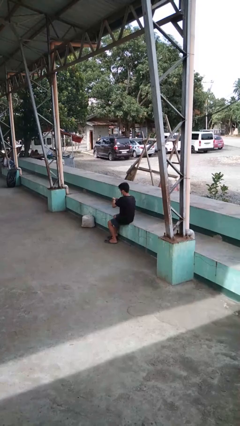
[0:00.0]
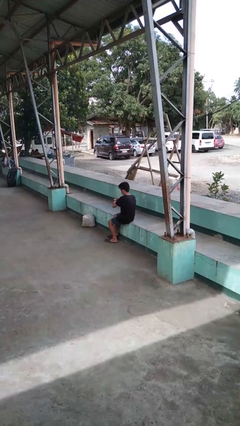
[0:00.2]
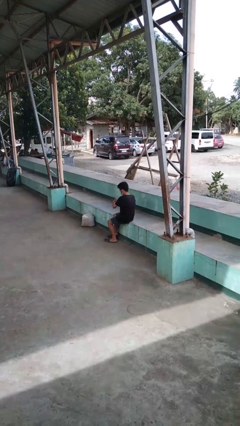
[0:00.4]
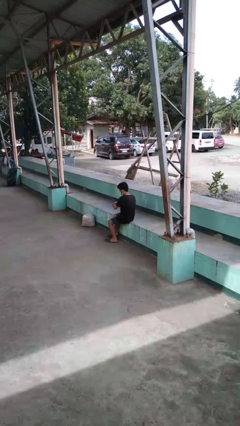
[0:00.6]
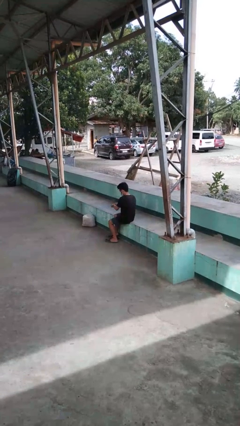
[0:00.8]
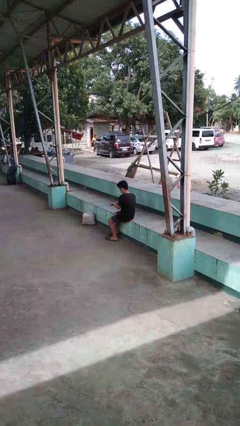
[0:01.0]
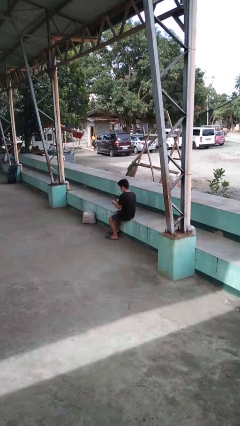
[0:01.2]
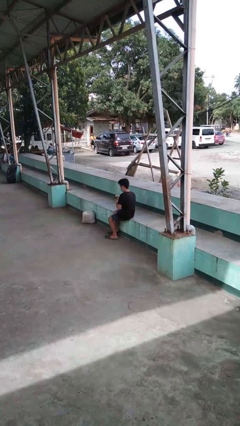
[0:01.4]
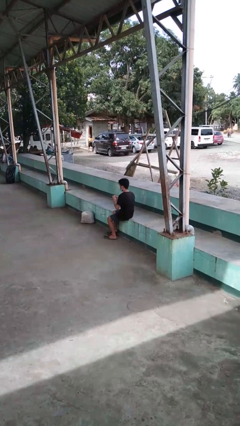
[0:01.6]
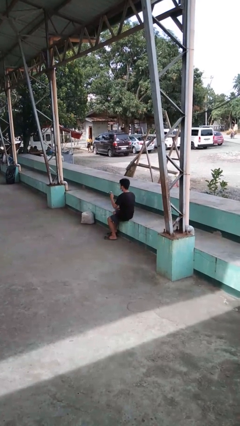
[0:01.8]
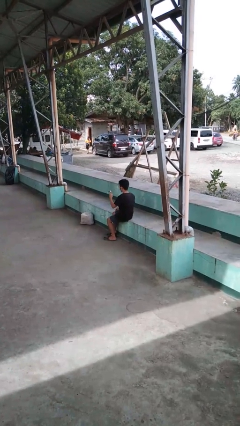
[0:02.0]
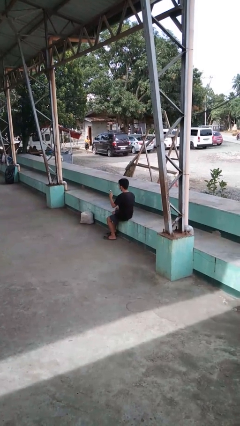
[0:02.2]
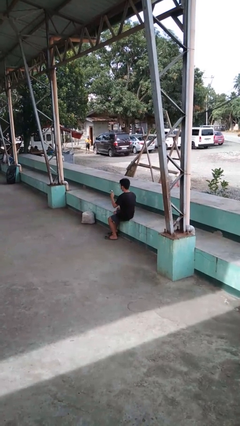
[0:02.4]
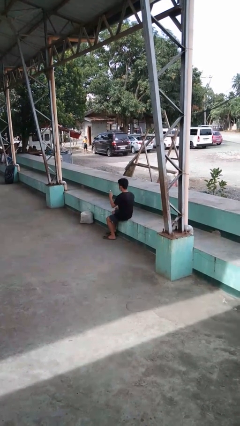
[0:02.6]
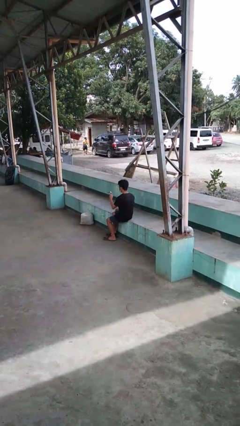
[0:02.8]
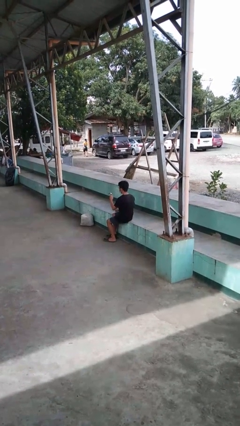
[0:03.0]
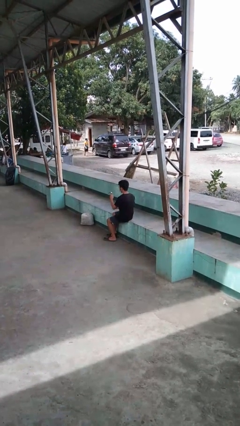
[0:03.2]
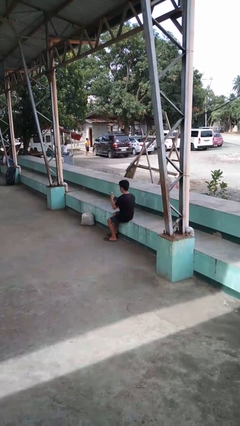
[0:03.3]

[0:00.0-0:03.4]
person takes off wristwatch

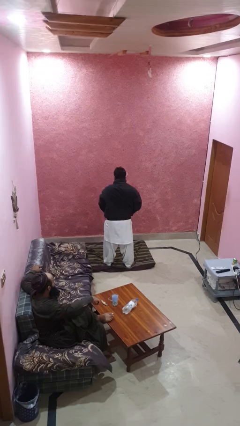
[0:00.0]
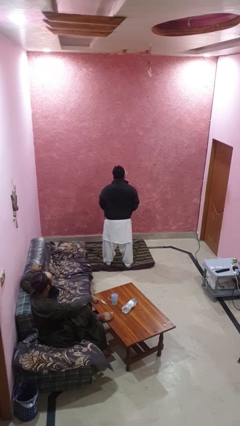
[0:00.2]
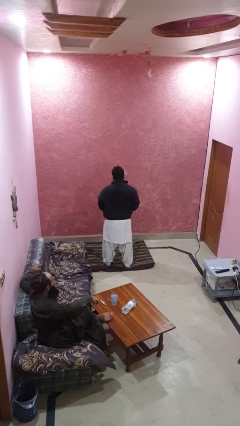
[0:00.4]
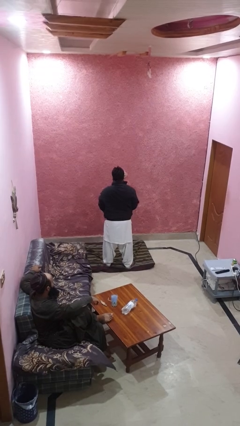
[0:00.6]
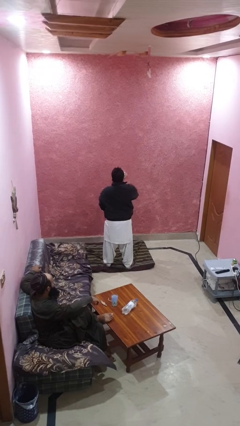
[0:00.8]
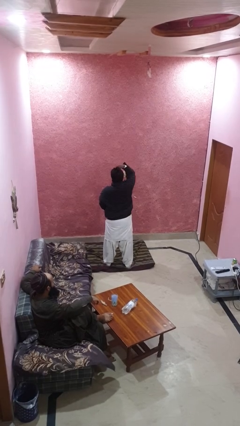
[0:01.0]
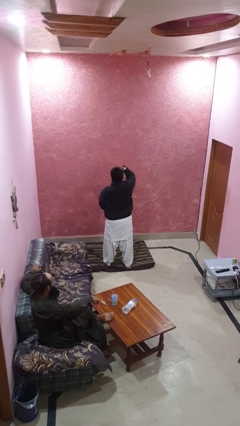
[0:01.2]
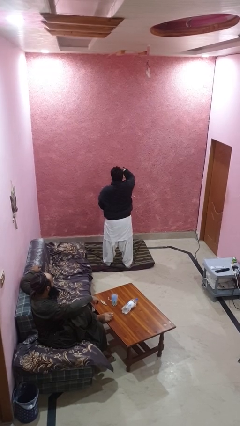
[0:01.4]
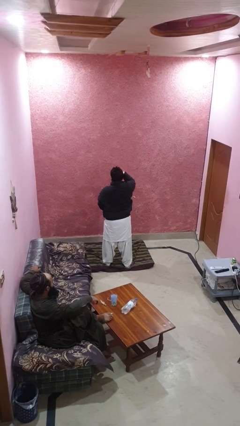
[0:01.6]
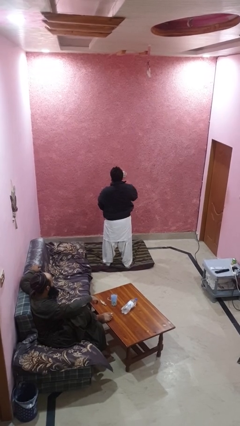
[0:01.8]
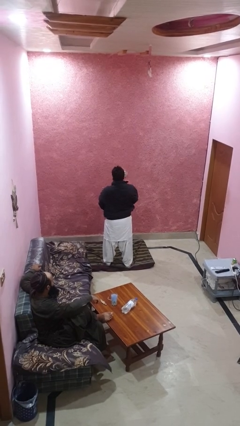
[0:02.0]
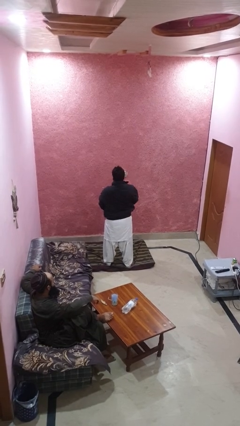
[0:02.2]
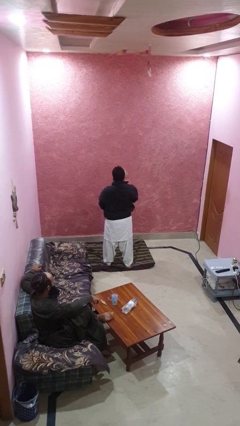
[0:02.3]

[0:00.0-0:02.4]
person zips up jacket

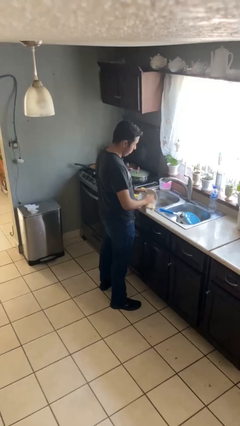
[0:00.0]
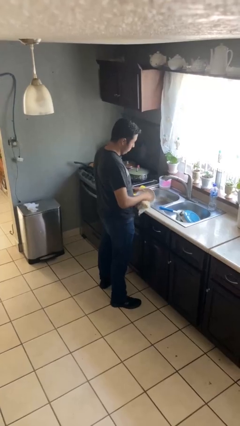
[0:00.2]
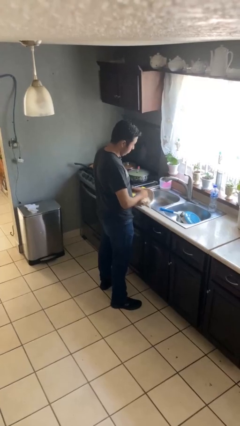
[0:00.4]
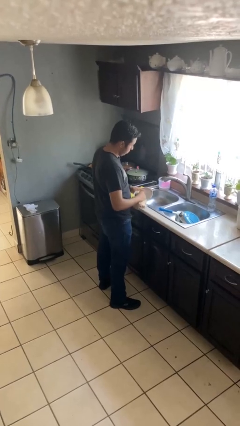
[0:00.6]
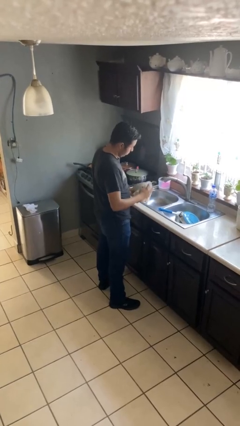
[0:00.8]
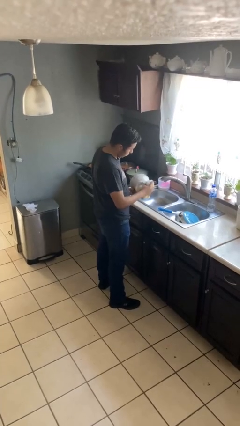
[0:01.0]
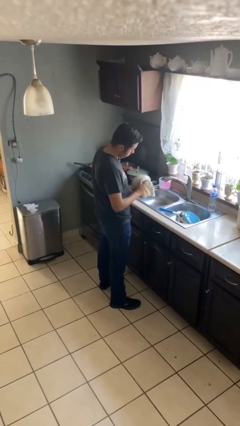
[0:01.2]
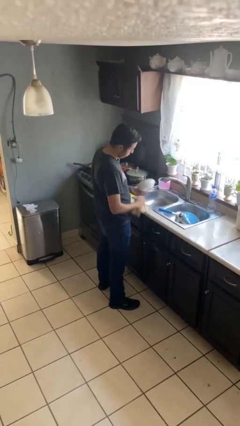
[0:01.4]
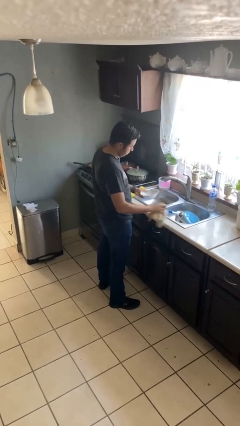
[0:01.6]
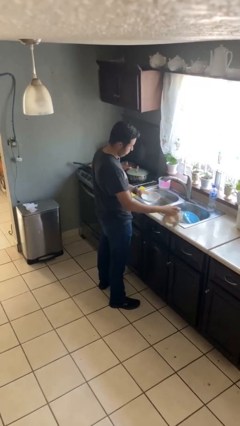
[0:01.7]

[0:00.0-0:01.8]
person dries dish

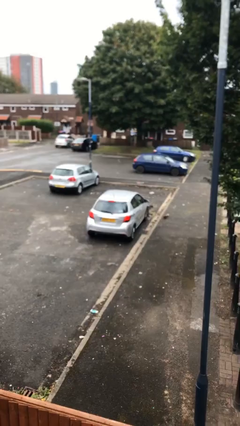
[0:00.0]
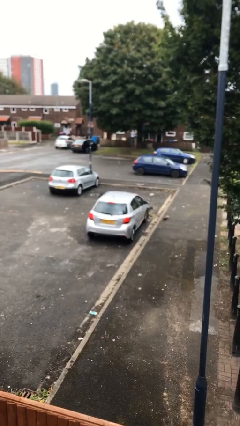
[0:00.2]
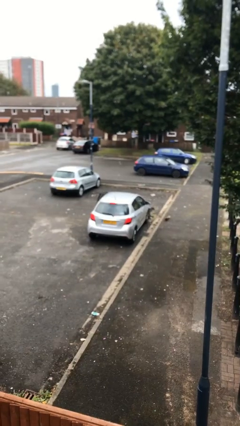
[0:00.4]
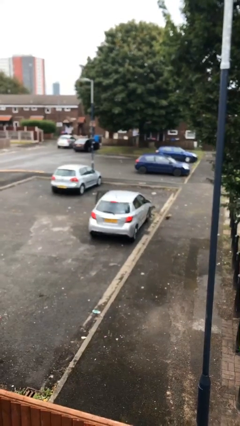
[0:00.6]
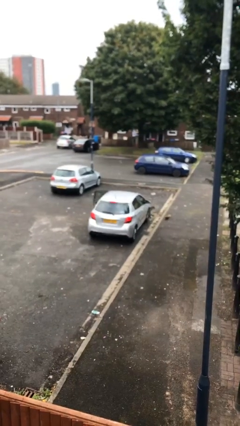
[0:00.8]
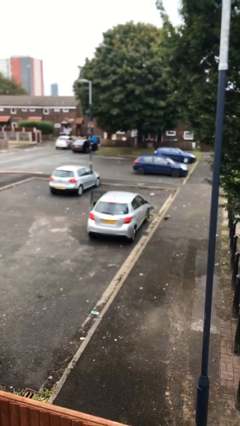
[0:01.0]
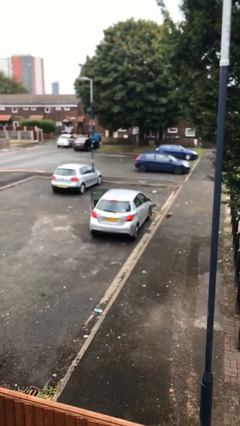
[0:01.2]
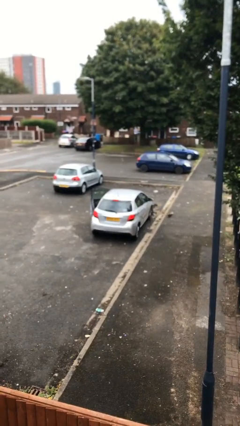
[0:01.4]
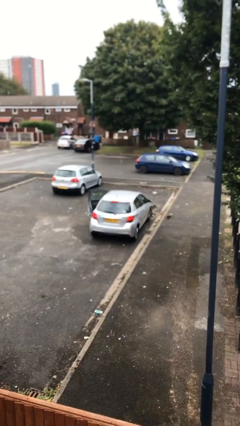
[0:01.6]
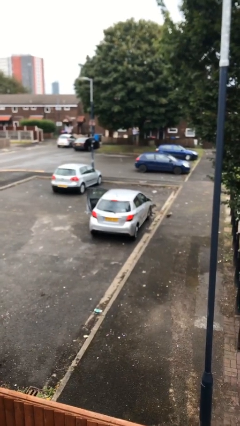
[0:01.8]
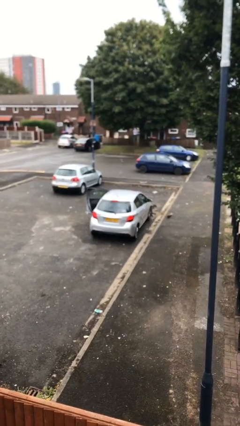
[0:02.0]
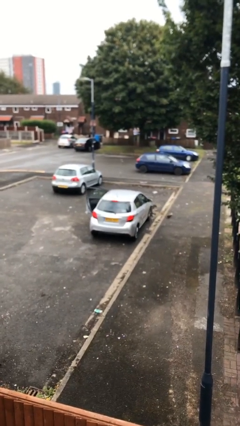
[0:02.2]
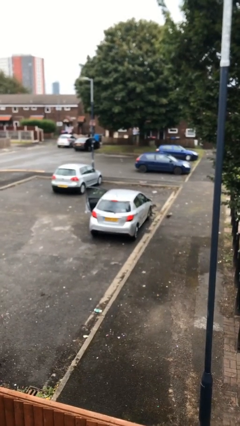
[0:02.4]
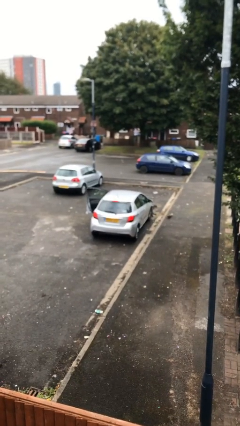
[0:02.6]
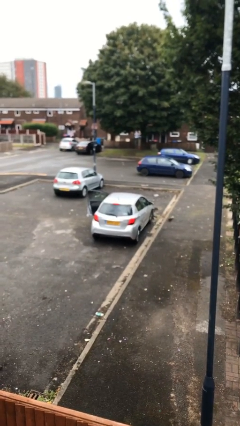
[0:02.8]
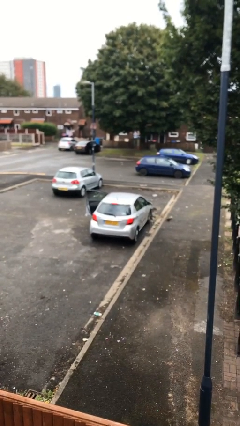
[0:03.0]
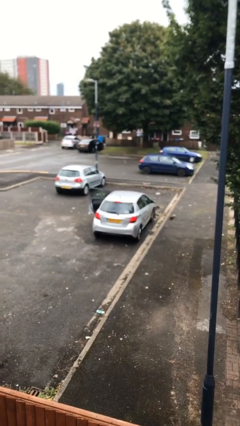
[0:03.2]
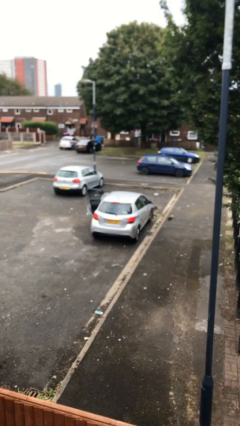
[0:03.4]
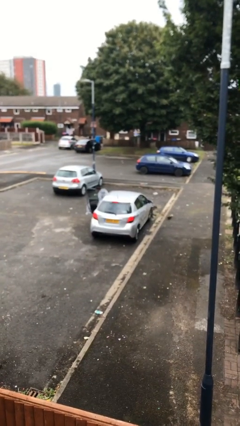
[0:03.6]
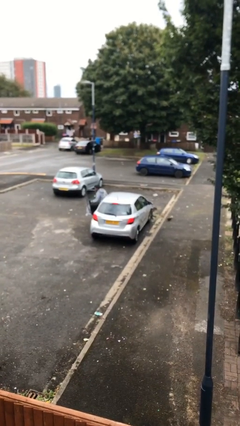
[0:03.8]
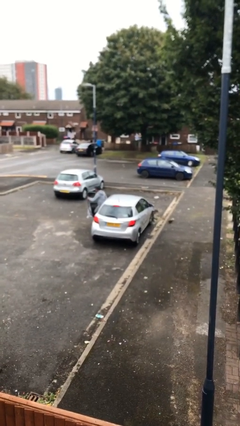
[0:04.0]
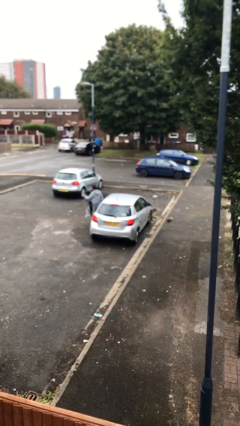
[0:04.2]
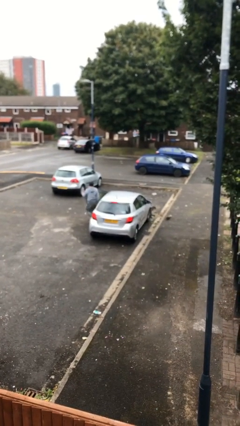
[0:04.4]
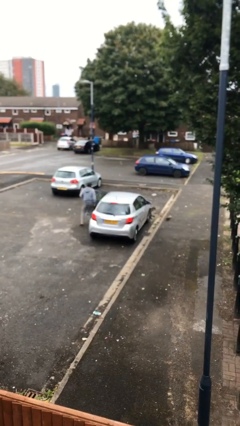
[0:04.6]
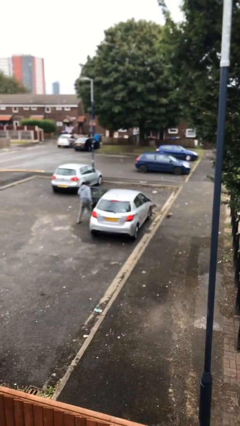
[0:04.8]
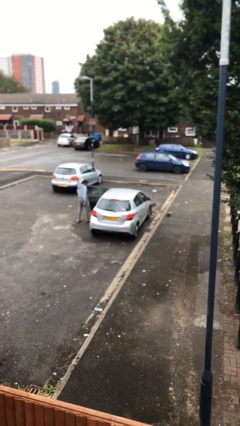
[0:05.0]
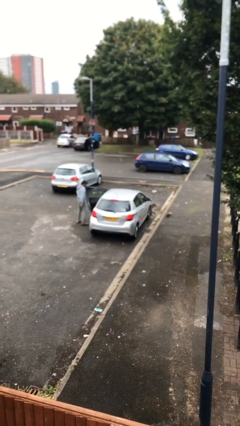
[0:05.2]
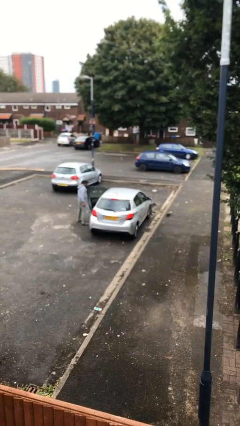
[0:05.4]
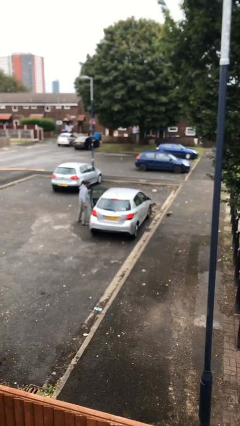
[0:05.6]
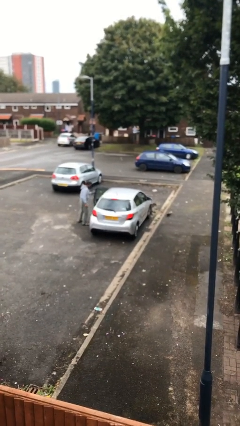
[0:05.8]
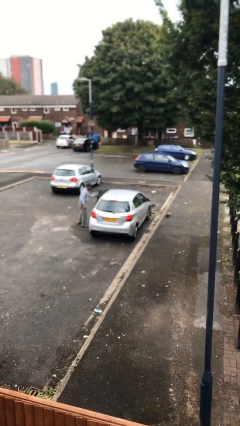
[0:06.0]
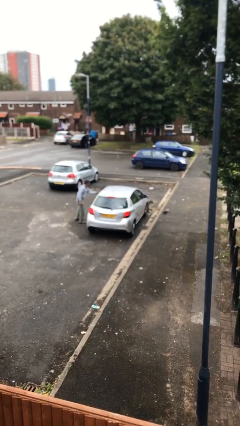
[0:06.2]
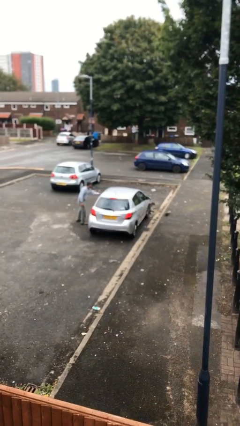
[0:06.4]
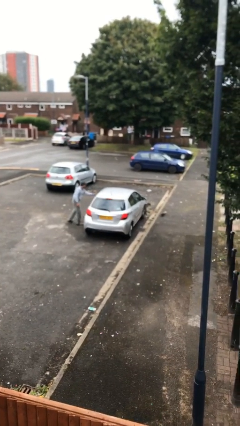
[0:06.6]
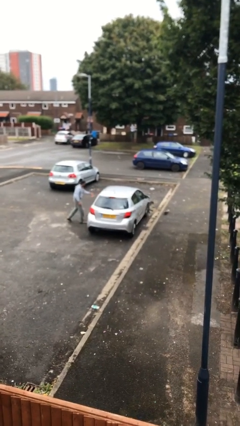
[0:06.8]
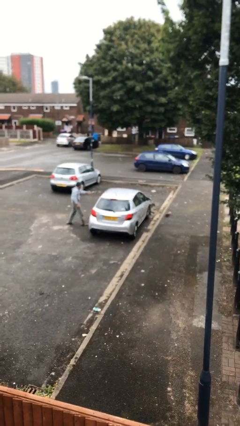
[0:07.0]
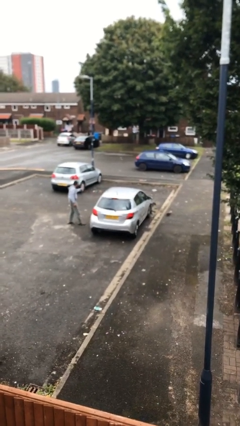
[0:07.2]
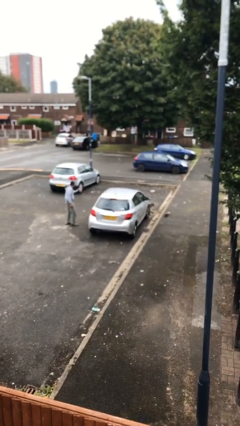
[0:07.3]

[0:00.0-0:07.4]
car drops off person

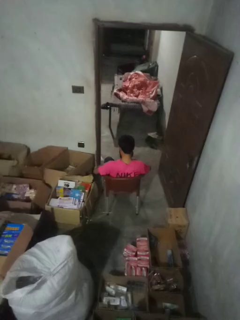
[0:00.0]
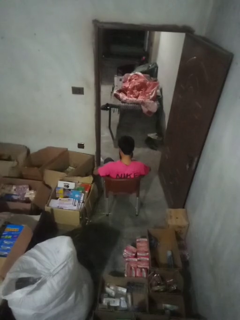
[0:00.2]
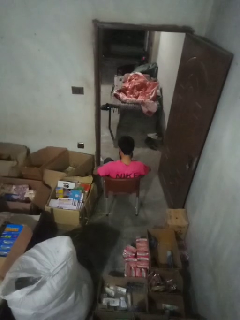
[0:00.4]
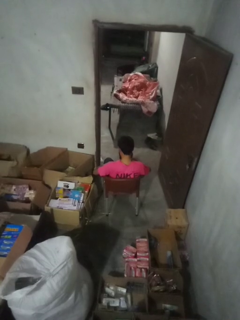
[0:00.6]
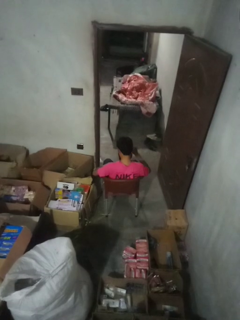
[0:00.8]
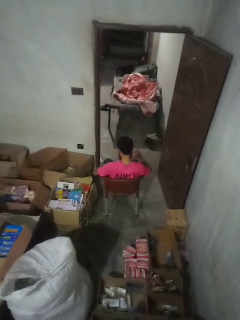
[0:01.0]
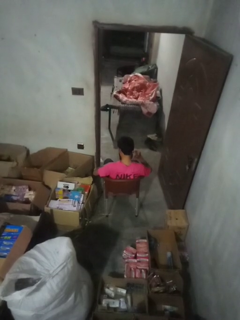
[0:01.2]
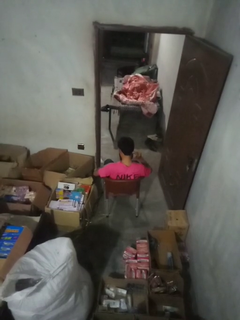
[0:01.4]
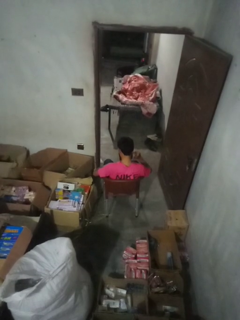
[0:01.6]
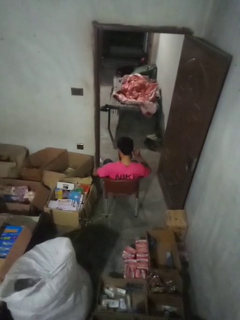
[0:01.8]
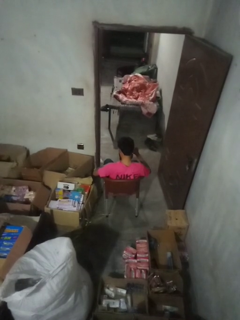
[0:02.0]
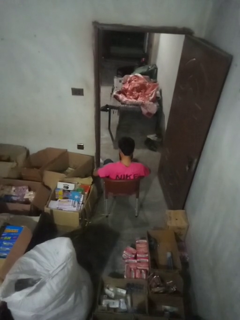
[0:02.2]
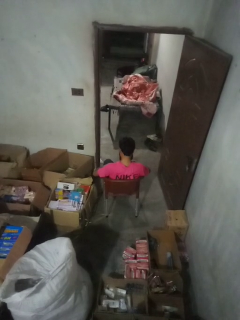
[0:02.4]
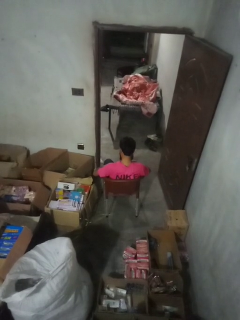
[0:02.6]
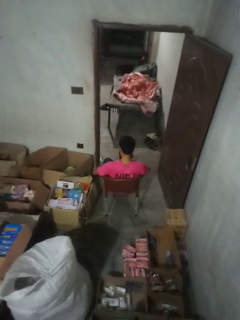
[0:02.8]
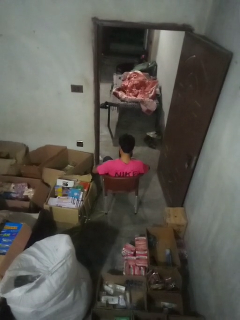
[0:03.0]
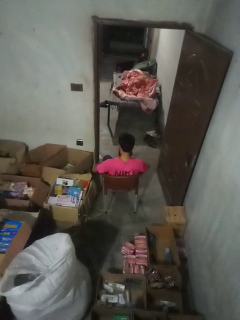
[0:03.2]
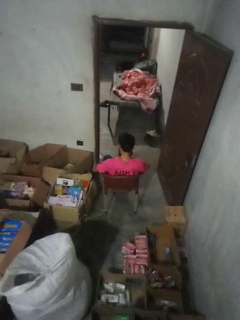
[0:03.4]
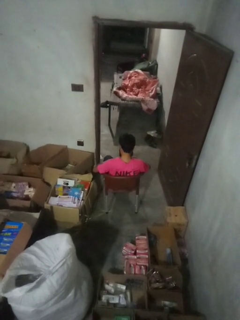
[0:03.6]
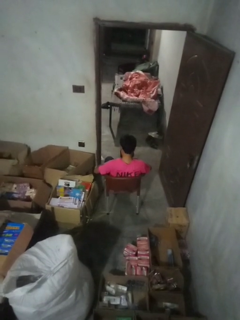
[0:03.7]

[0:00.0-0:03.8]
person touches earlobe
